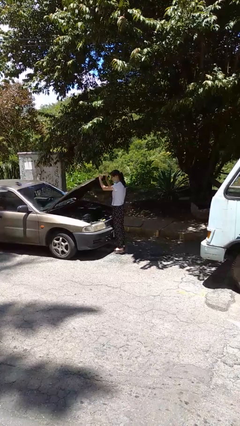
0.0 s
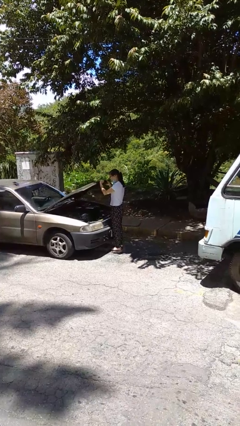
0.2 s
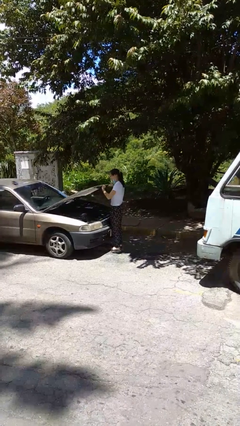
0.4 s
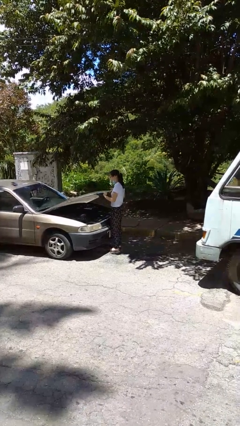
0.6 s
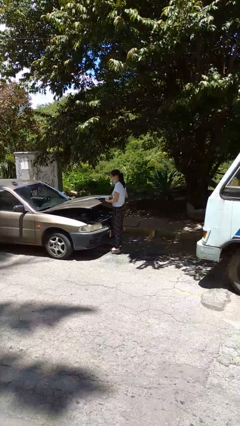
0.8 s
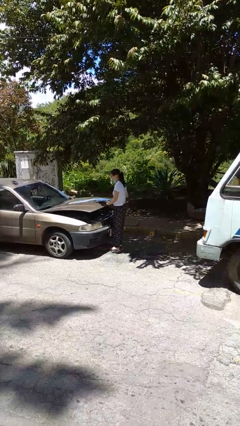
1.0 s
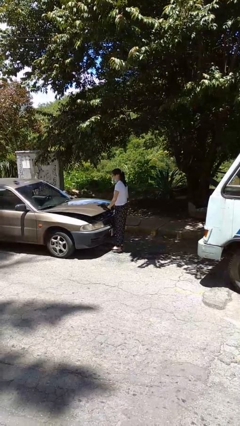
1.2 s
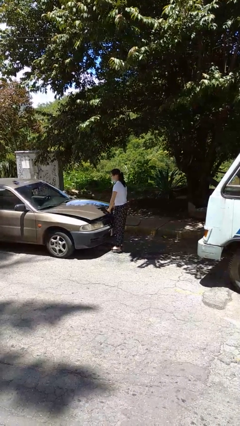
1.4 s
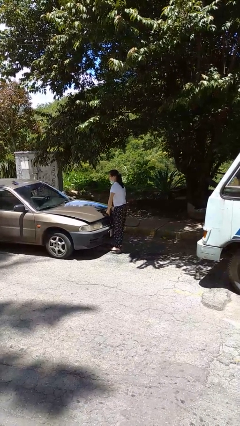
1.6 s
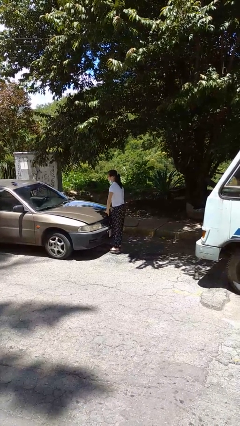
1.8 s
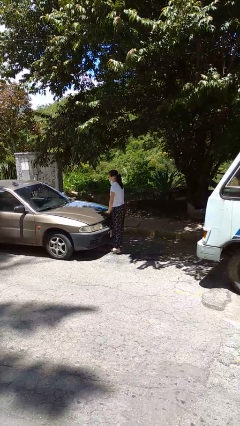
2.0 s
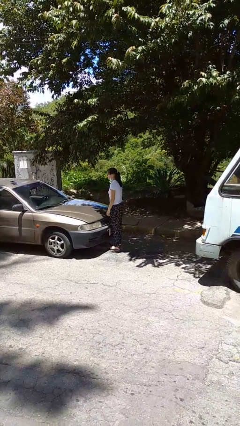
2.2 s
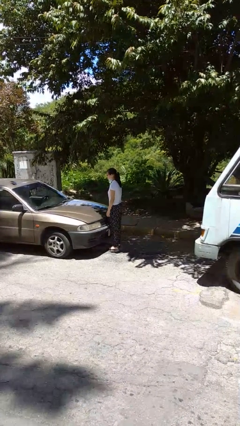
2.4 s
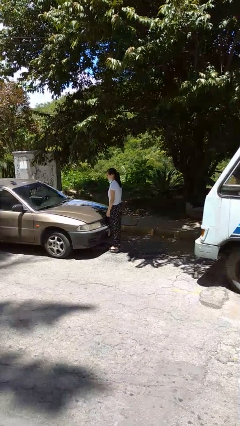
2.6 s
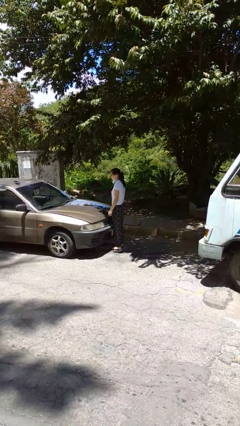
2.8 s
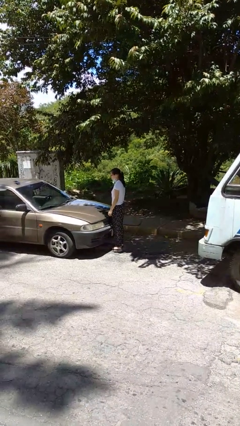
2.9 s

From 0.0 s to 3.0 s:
person closes car hood

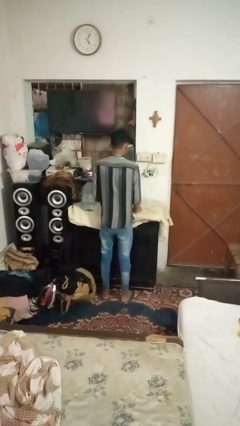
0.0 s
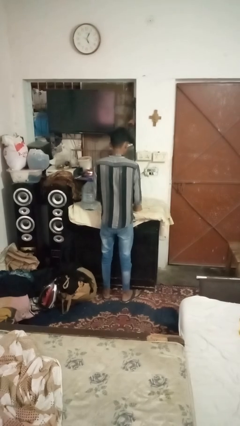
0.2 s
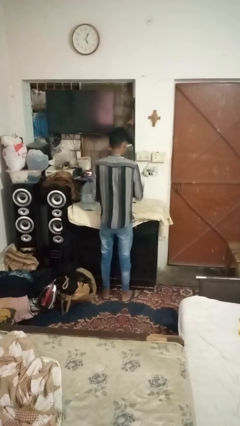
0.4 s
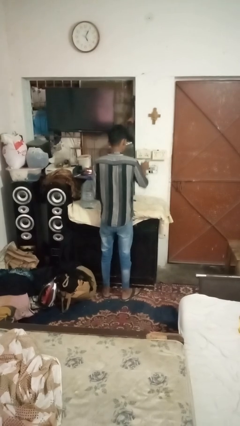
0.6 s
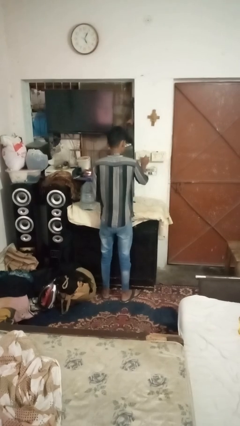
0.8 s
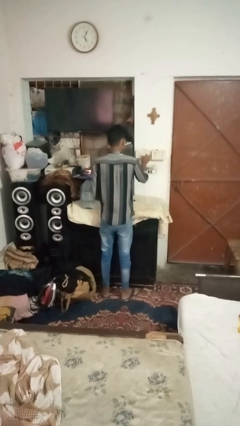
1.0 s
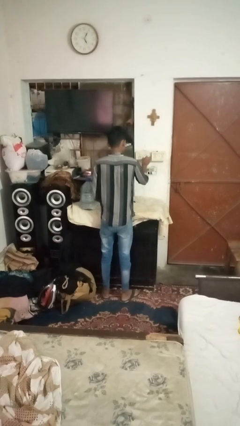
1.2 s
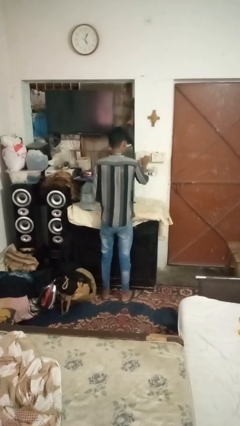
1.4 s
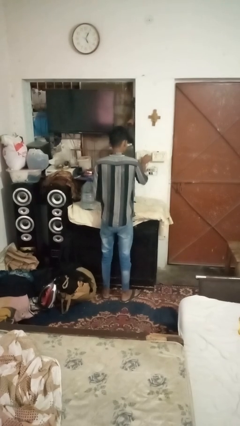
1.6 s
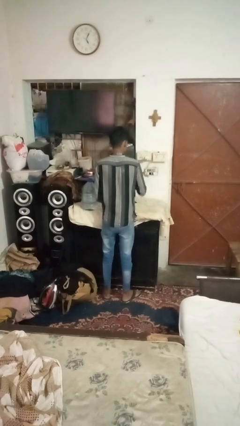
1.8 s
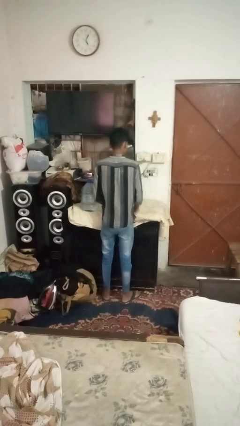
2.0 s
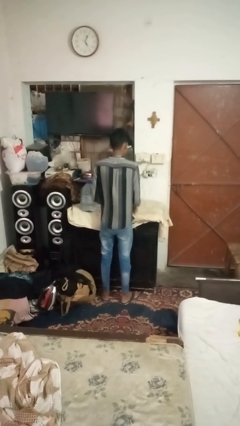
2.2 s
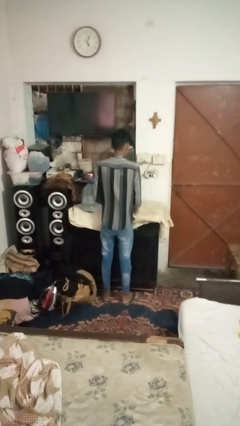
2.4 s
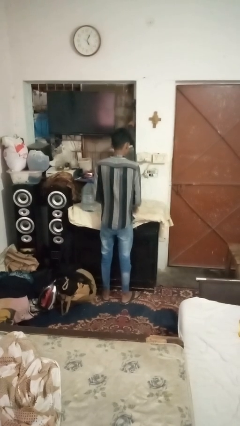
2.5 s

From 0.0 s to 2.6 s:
person plugs into electrical socket

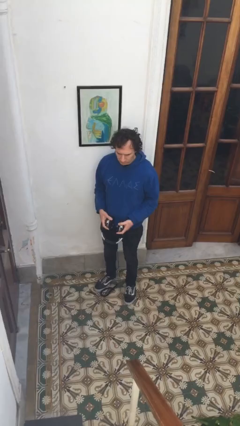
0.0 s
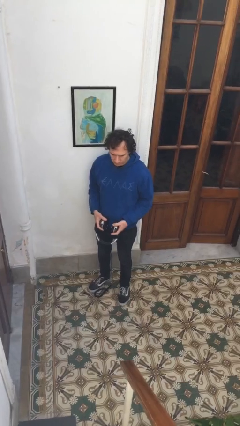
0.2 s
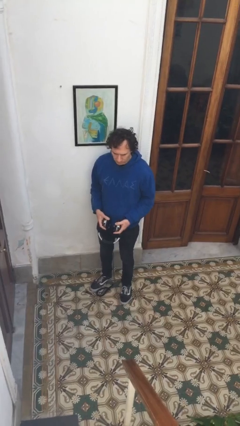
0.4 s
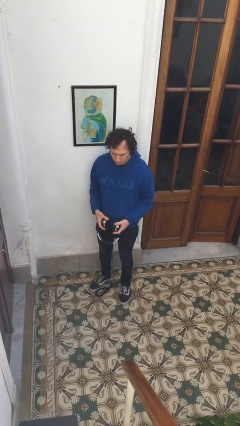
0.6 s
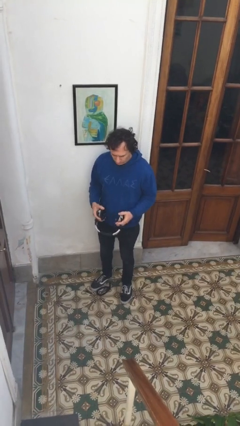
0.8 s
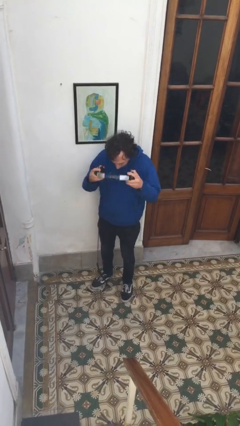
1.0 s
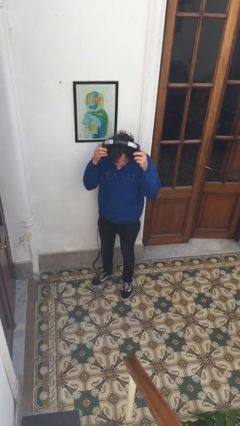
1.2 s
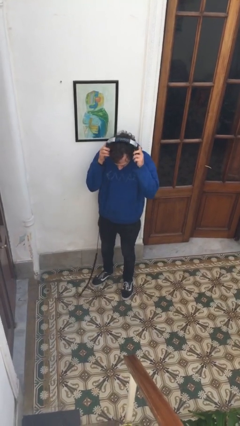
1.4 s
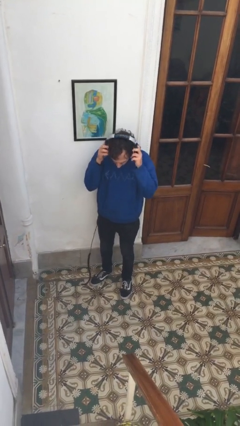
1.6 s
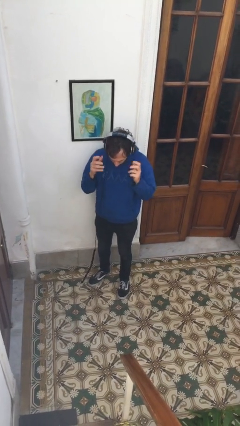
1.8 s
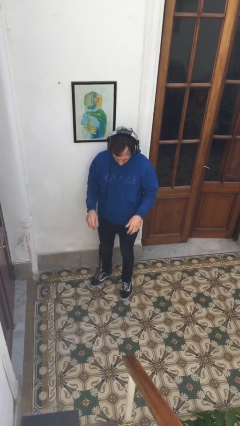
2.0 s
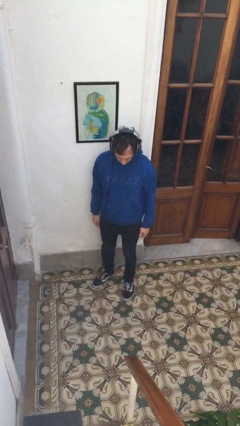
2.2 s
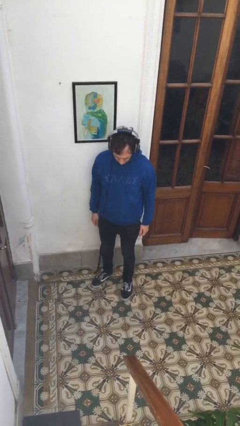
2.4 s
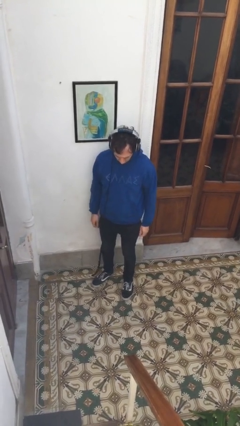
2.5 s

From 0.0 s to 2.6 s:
person puts on headphones

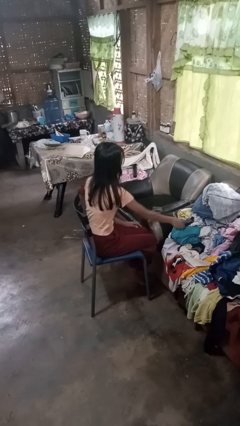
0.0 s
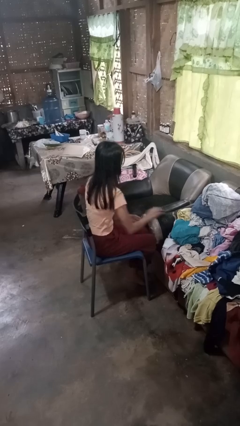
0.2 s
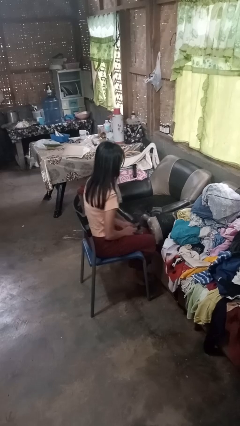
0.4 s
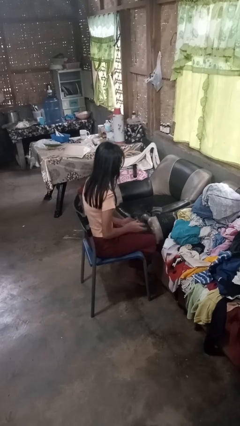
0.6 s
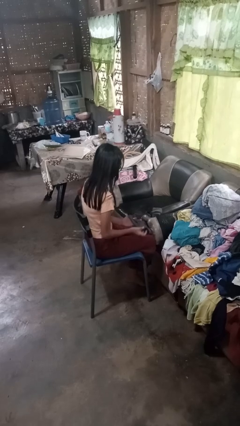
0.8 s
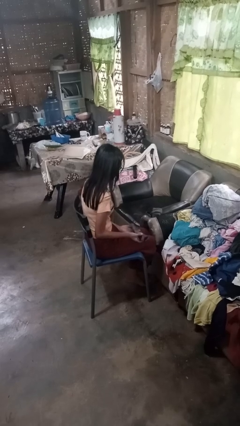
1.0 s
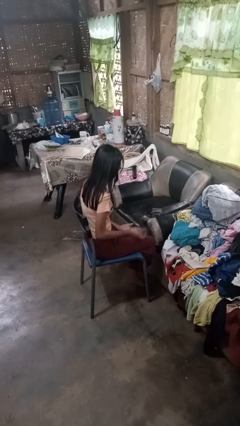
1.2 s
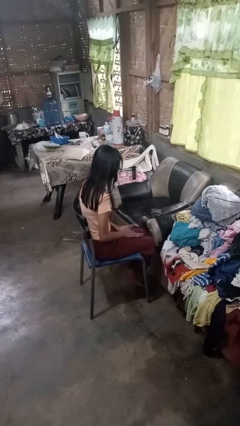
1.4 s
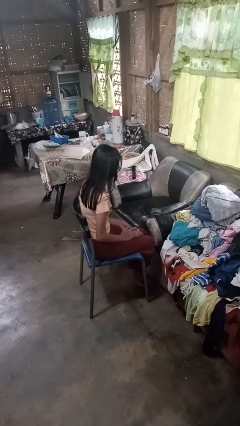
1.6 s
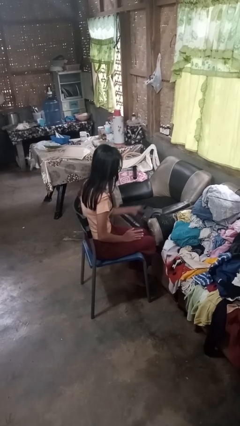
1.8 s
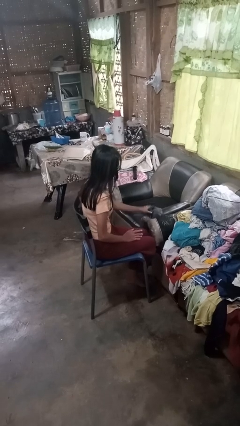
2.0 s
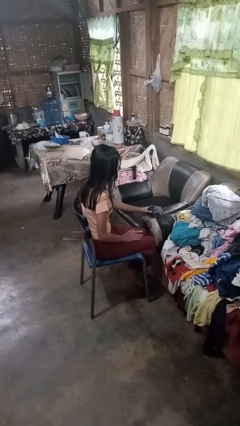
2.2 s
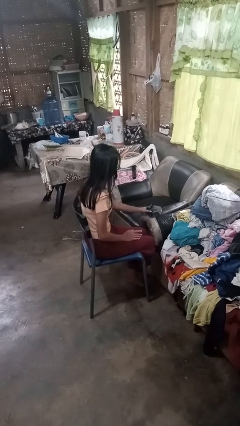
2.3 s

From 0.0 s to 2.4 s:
person folds socks

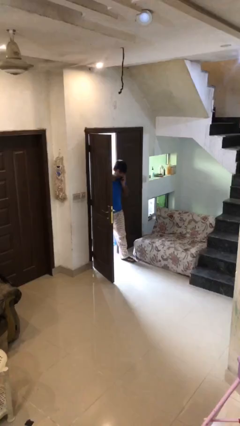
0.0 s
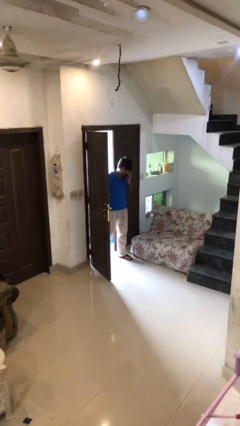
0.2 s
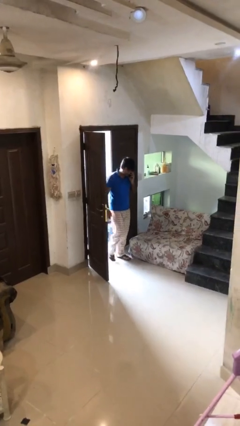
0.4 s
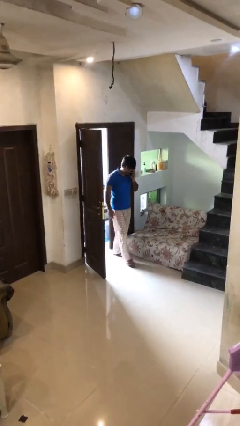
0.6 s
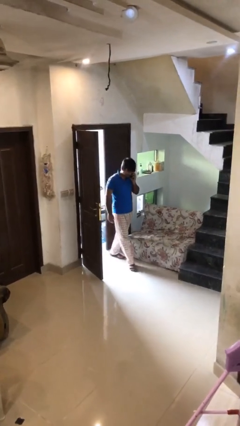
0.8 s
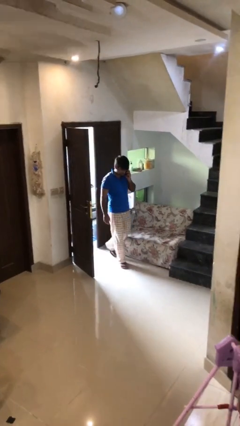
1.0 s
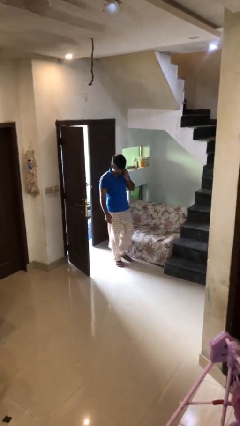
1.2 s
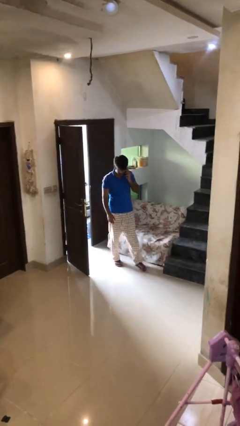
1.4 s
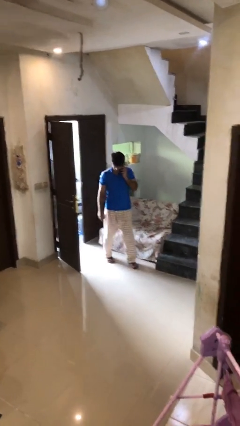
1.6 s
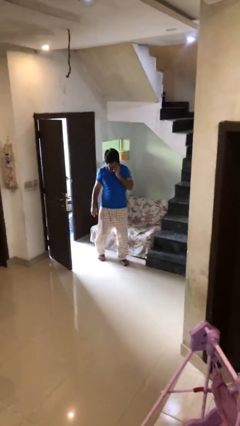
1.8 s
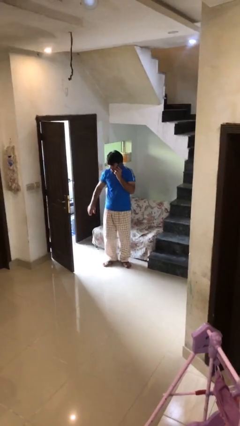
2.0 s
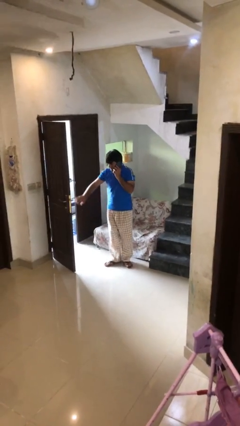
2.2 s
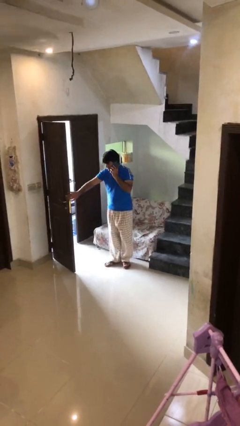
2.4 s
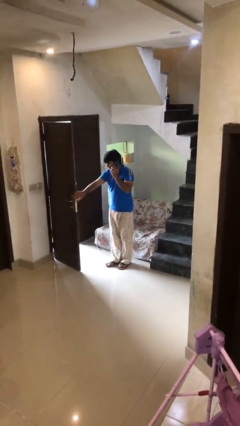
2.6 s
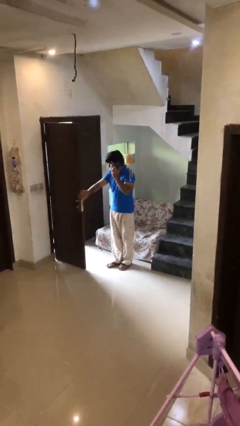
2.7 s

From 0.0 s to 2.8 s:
person enters scene through structure

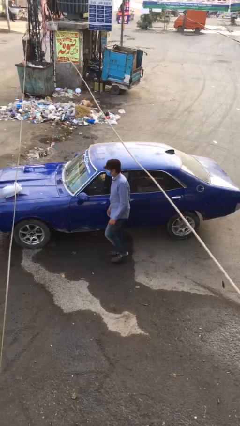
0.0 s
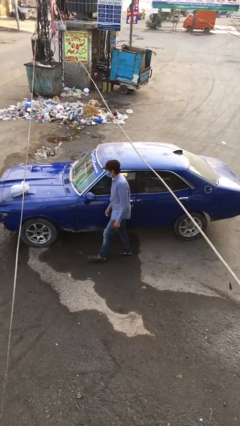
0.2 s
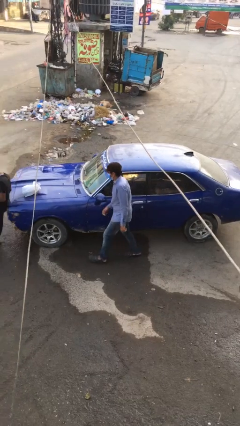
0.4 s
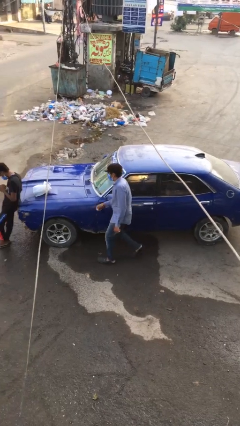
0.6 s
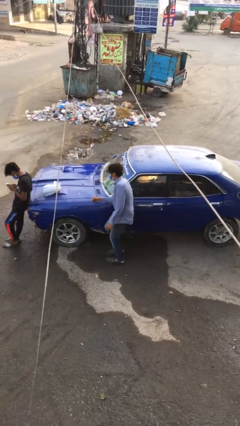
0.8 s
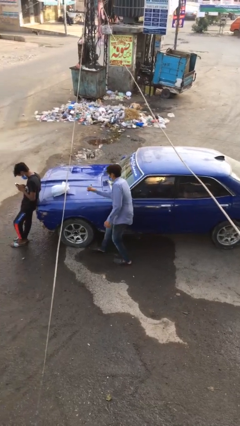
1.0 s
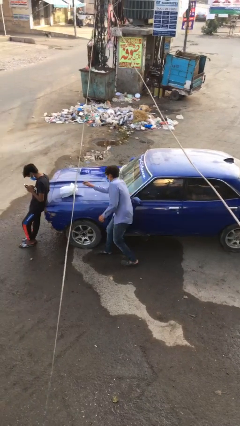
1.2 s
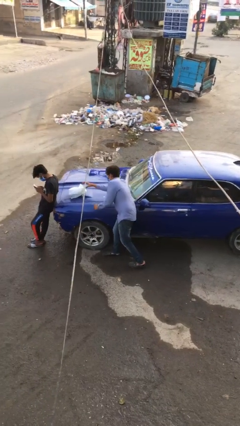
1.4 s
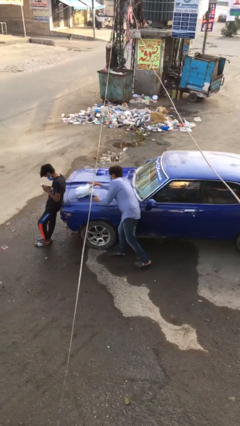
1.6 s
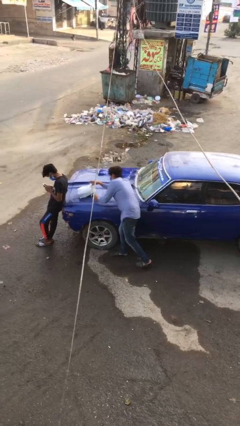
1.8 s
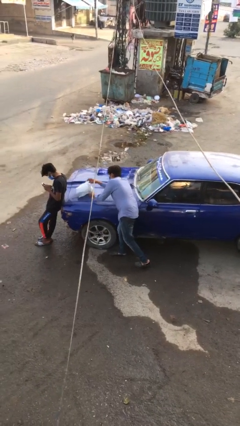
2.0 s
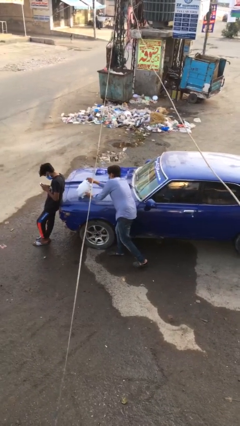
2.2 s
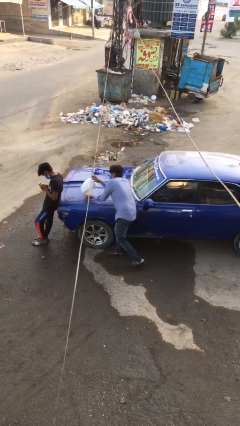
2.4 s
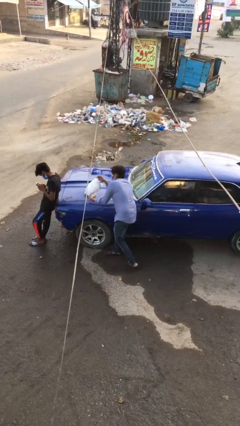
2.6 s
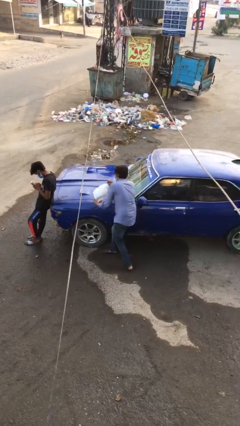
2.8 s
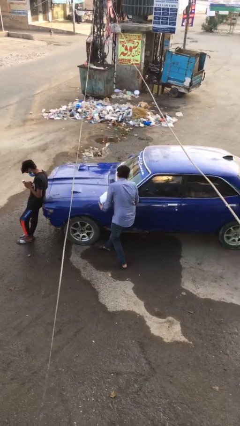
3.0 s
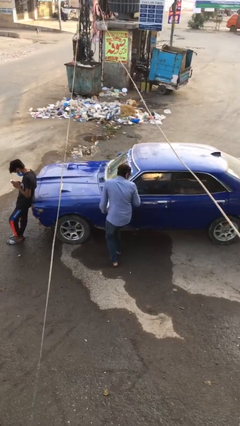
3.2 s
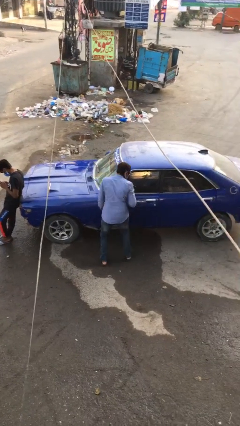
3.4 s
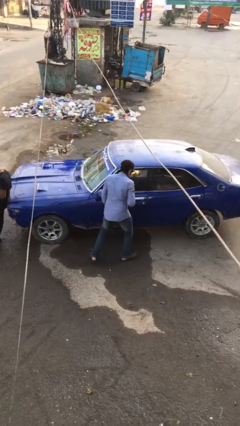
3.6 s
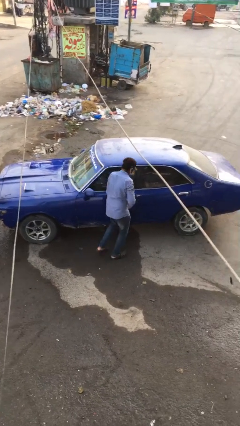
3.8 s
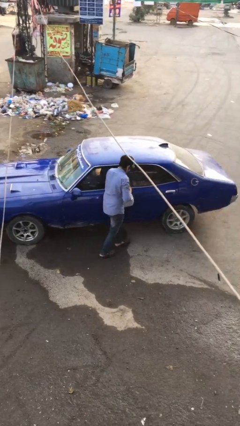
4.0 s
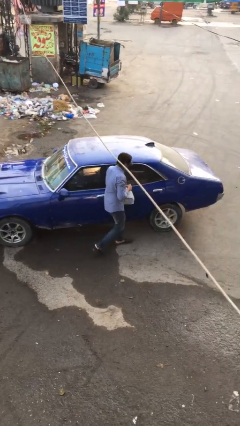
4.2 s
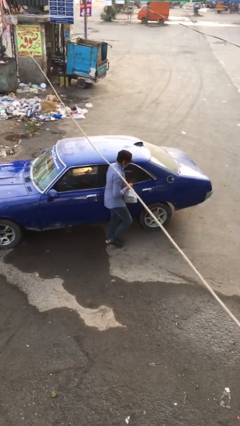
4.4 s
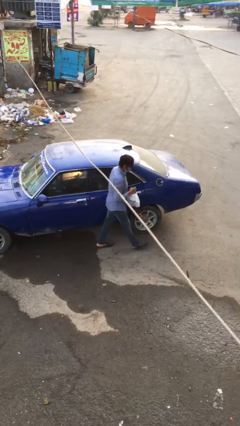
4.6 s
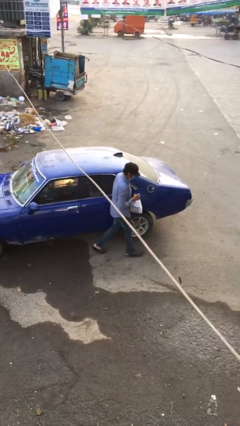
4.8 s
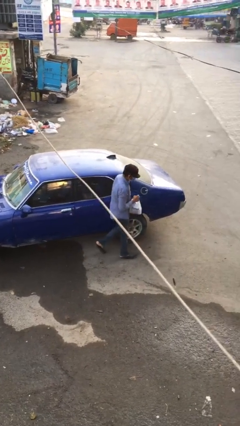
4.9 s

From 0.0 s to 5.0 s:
person steals object from person
